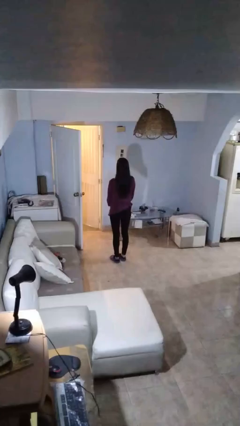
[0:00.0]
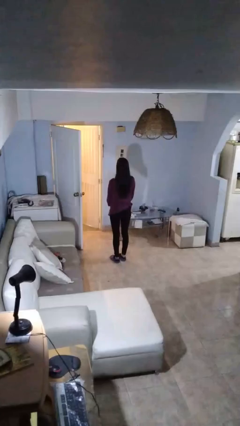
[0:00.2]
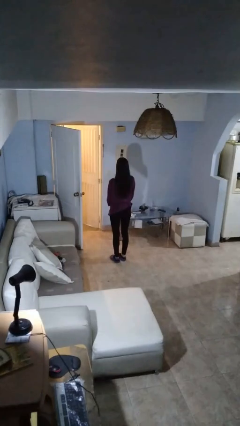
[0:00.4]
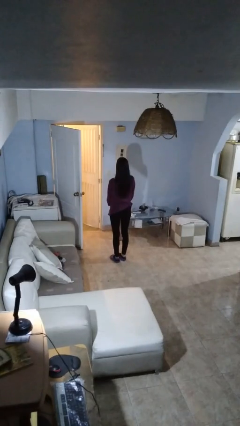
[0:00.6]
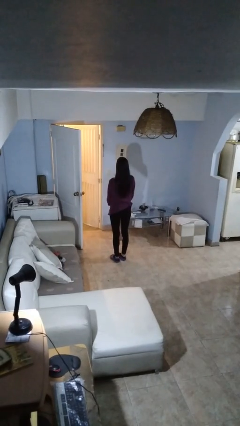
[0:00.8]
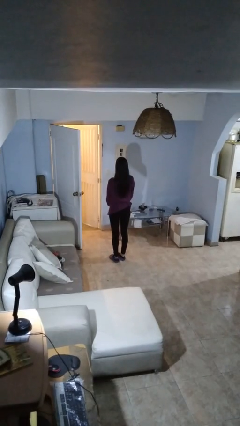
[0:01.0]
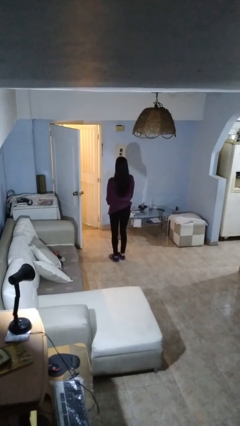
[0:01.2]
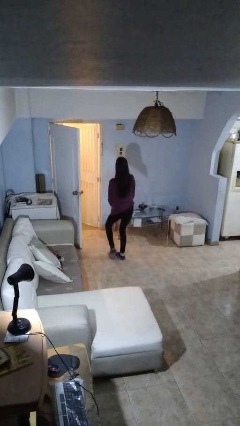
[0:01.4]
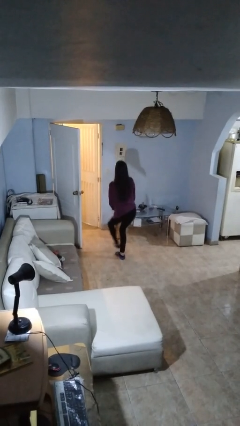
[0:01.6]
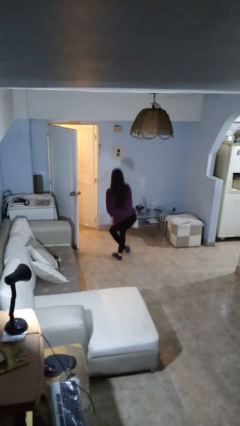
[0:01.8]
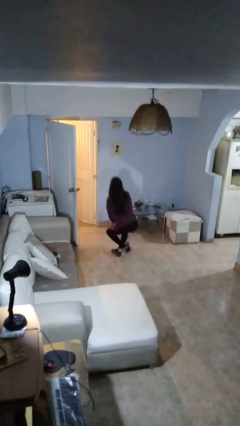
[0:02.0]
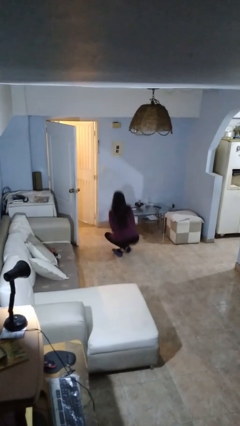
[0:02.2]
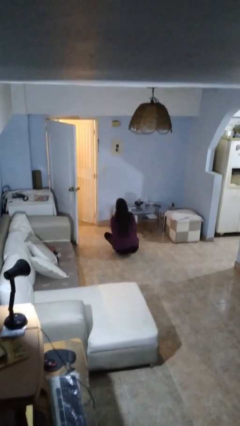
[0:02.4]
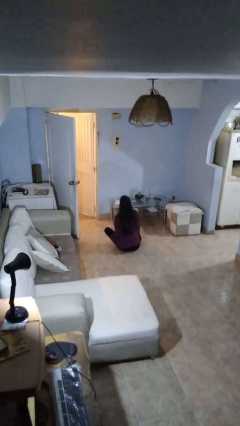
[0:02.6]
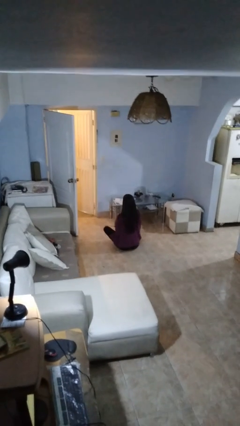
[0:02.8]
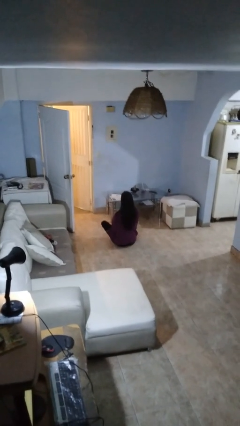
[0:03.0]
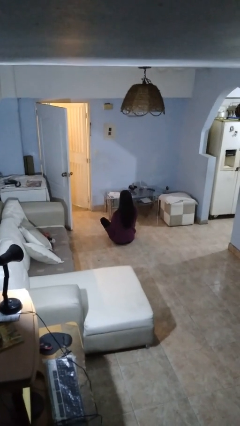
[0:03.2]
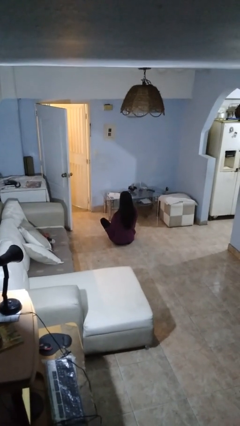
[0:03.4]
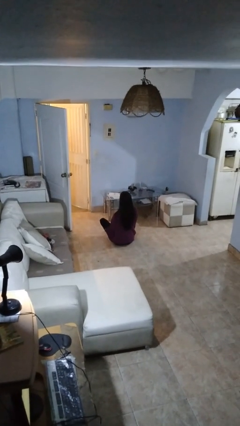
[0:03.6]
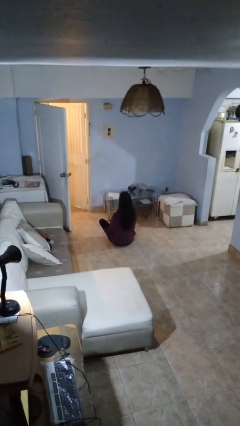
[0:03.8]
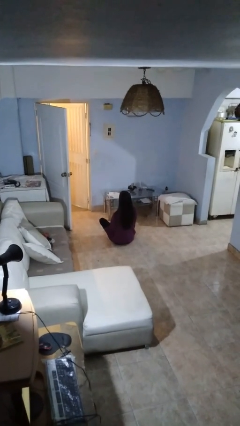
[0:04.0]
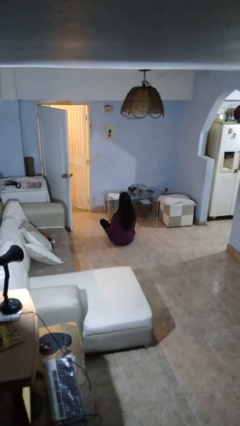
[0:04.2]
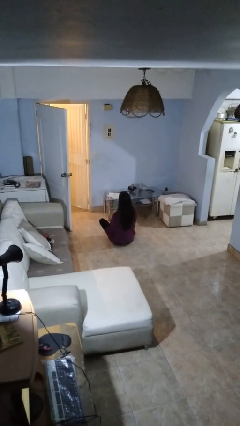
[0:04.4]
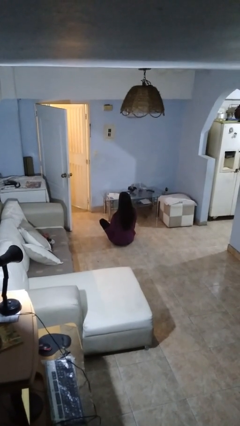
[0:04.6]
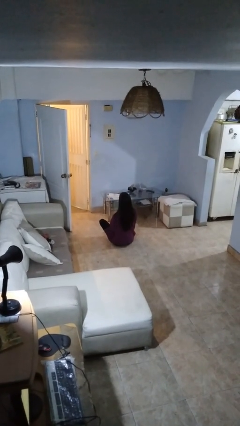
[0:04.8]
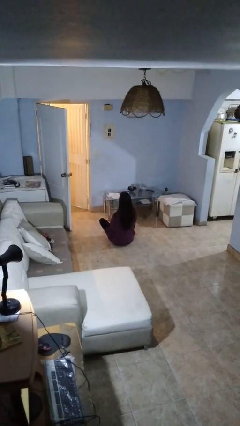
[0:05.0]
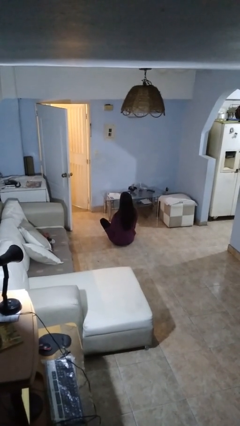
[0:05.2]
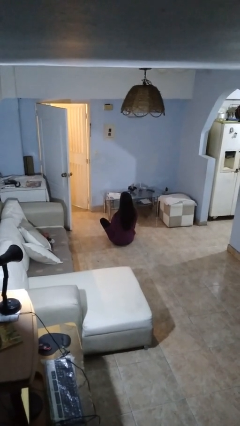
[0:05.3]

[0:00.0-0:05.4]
person sits crisscross

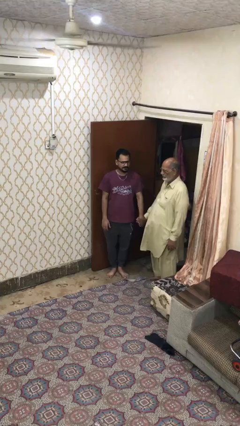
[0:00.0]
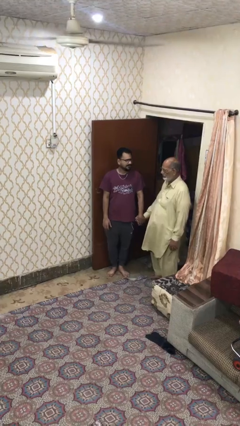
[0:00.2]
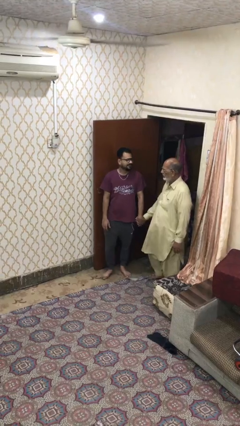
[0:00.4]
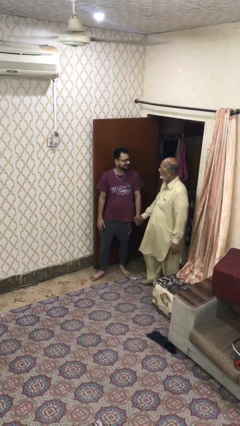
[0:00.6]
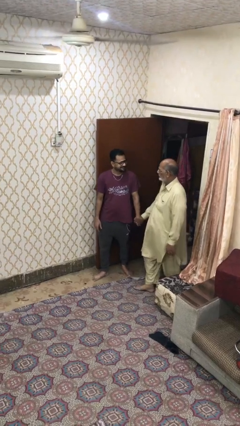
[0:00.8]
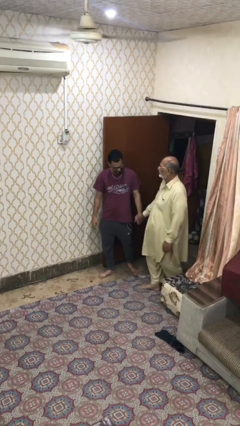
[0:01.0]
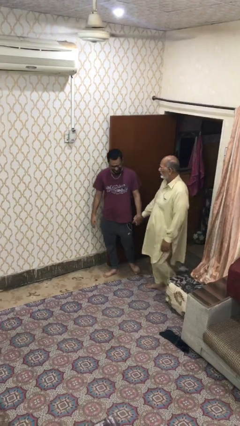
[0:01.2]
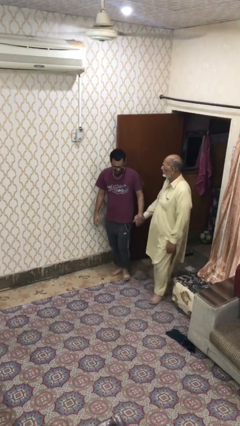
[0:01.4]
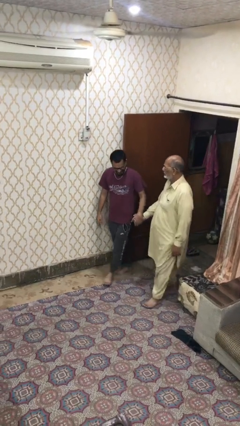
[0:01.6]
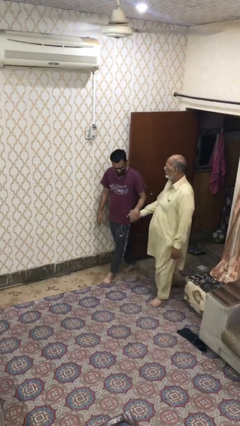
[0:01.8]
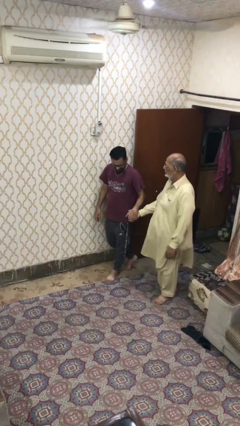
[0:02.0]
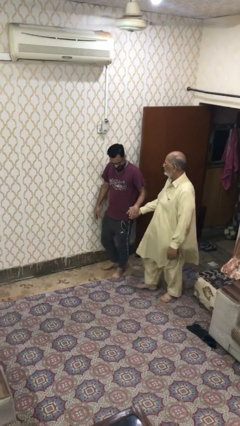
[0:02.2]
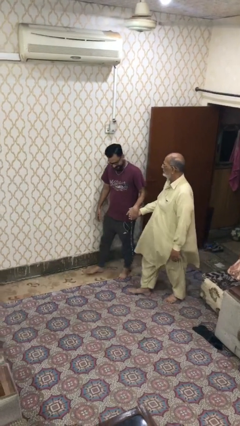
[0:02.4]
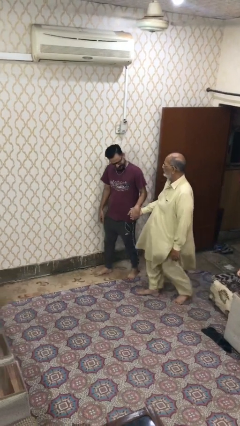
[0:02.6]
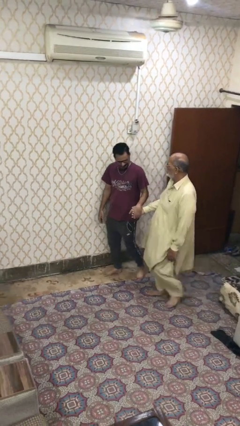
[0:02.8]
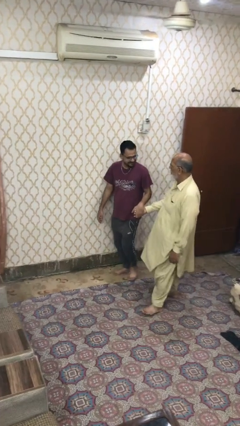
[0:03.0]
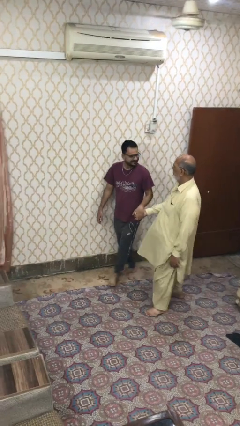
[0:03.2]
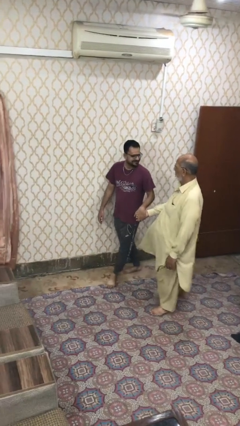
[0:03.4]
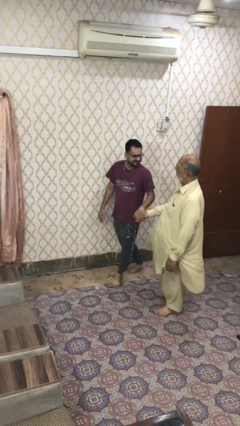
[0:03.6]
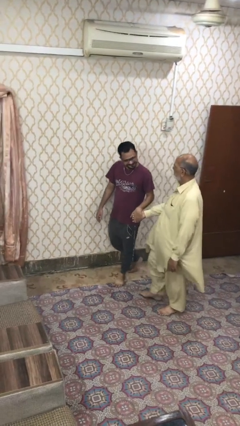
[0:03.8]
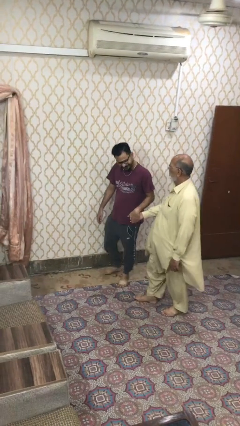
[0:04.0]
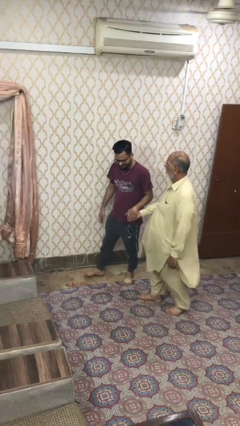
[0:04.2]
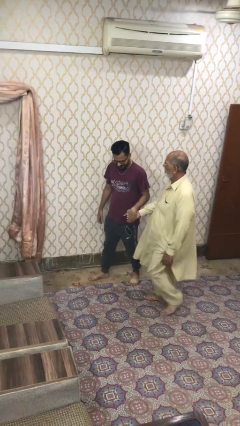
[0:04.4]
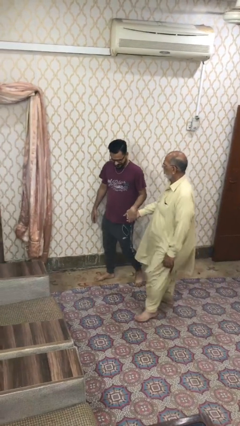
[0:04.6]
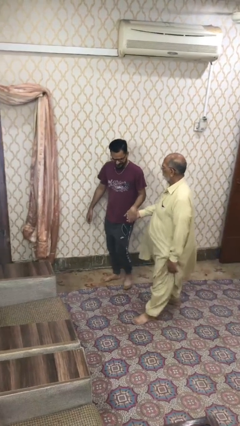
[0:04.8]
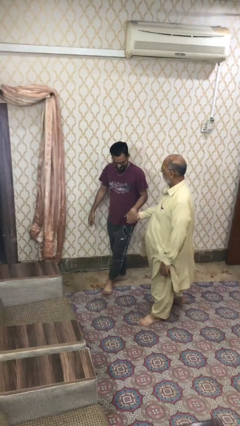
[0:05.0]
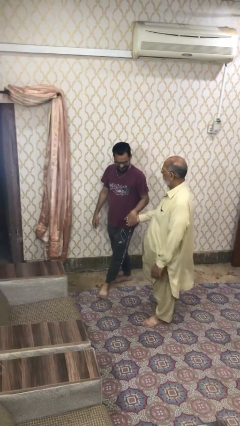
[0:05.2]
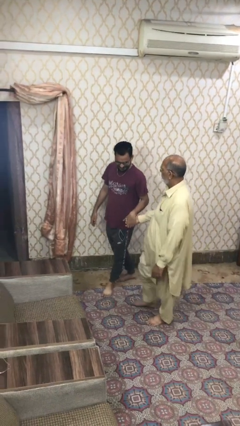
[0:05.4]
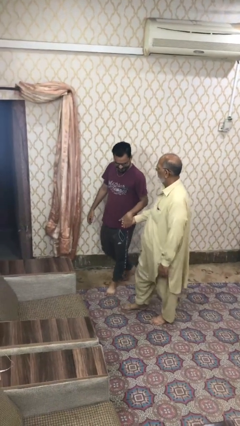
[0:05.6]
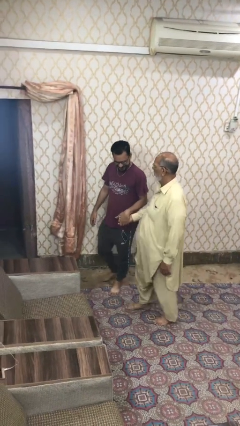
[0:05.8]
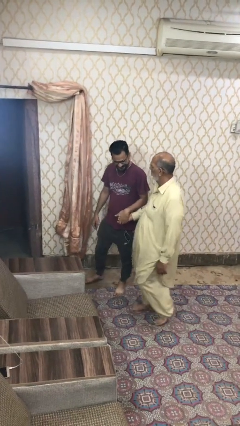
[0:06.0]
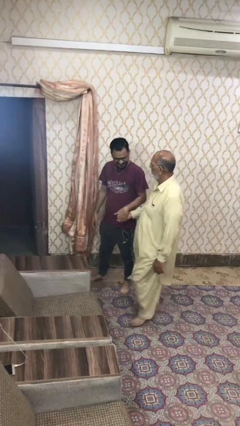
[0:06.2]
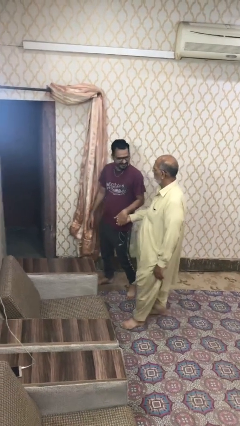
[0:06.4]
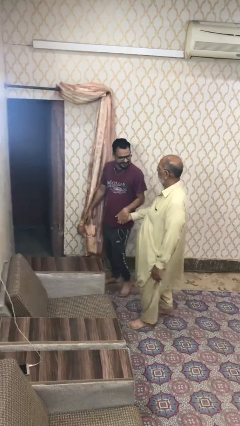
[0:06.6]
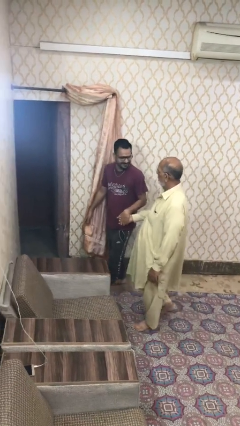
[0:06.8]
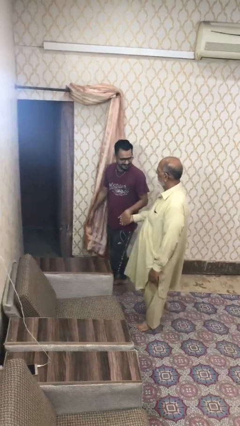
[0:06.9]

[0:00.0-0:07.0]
person holds hand

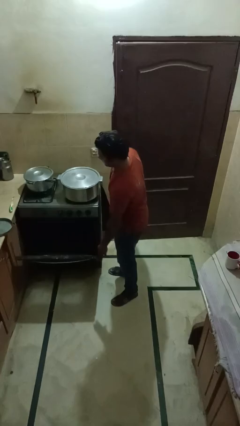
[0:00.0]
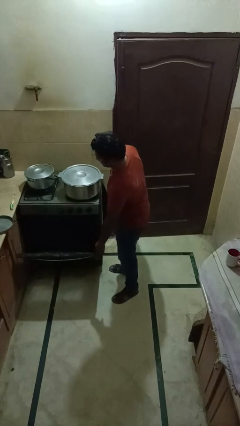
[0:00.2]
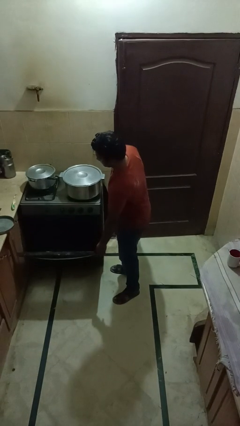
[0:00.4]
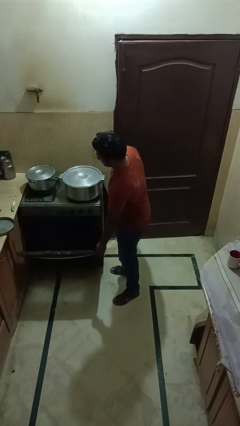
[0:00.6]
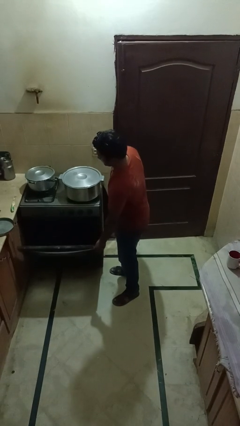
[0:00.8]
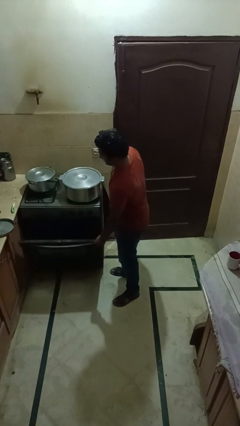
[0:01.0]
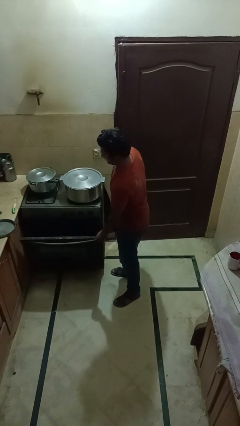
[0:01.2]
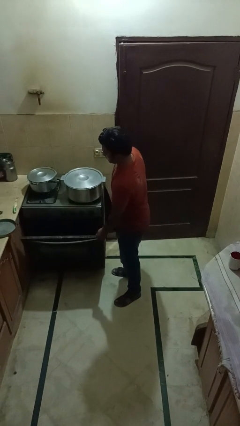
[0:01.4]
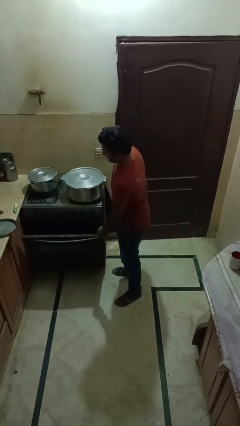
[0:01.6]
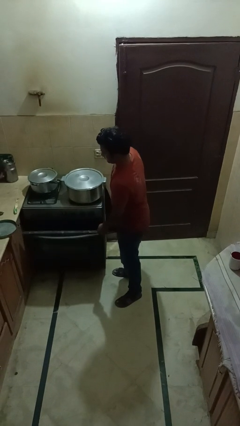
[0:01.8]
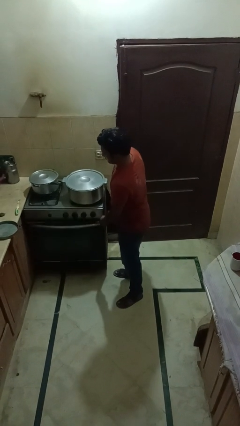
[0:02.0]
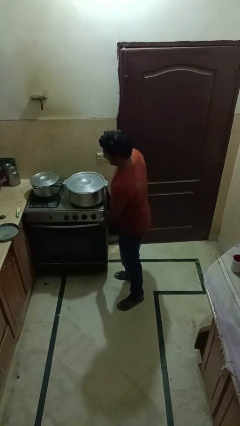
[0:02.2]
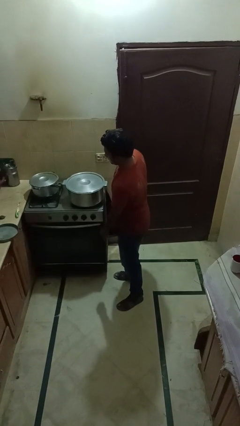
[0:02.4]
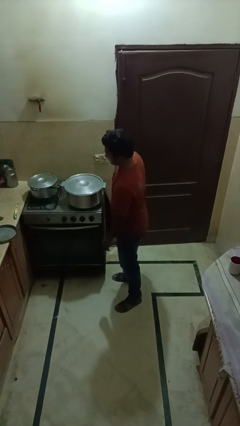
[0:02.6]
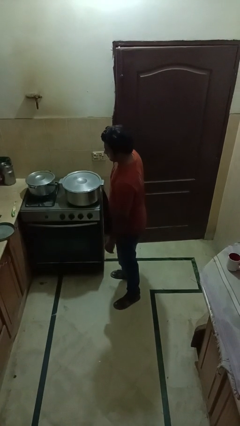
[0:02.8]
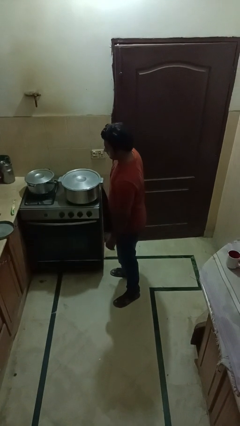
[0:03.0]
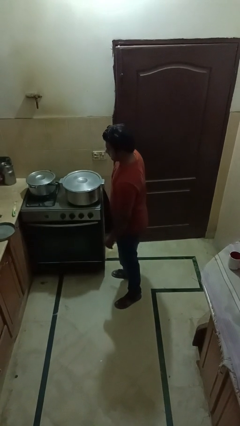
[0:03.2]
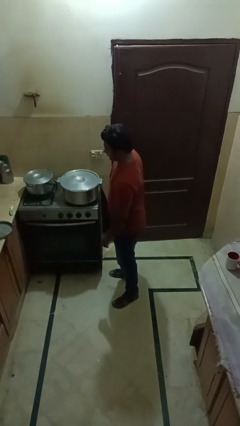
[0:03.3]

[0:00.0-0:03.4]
person closes oven door

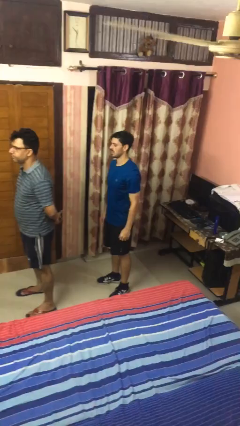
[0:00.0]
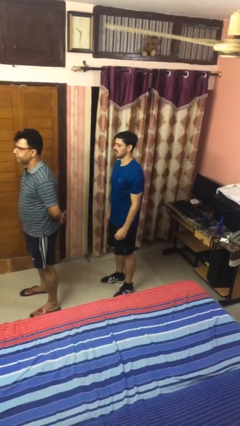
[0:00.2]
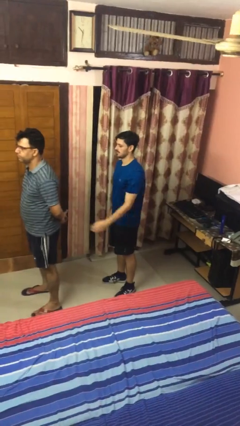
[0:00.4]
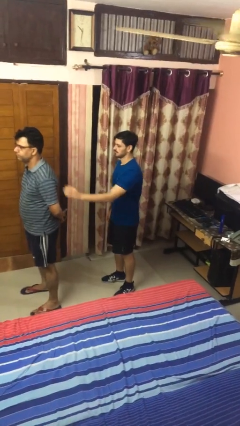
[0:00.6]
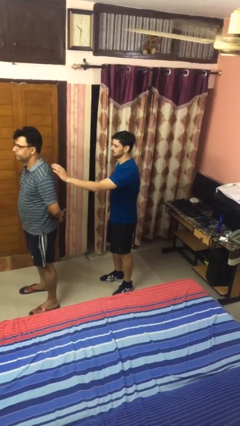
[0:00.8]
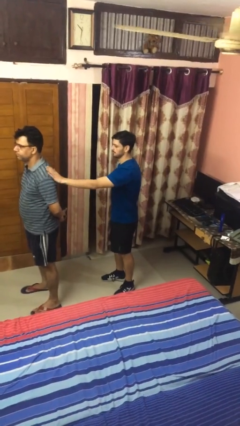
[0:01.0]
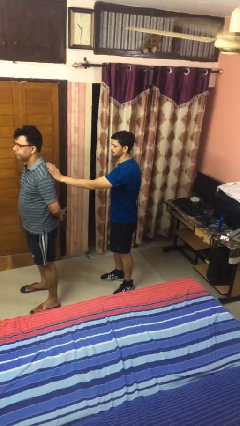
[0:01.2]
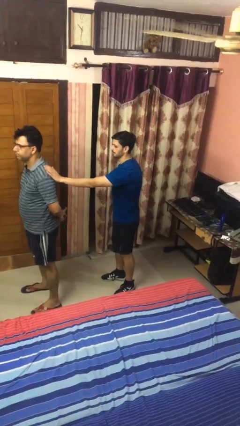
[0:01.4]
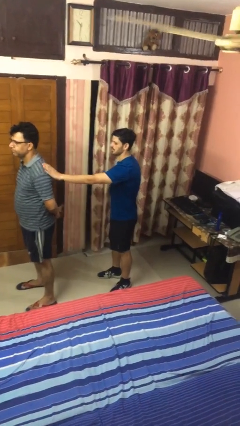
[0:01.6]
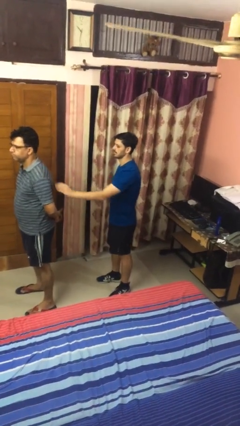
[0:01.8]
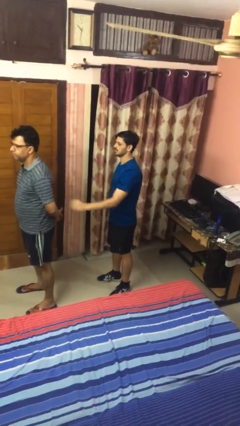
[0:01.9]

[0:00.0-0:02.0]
person touches back of person

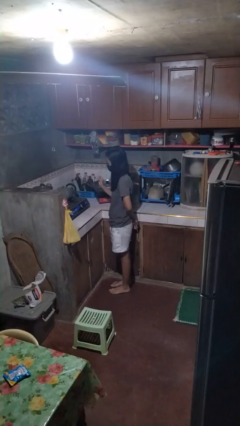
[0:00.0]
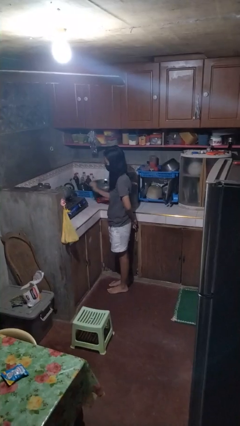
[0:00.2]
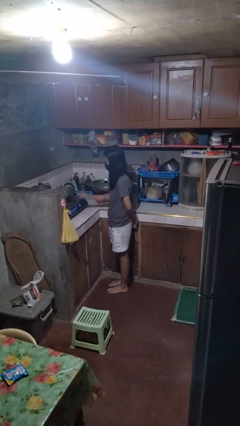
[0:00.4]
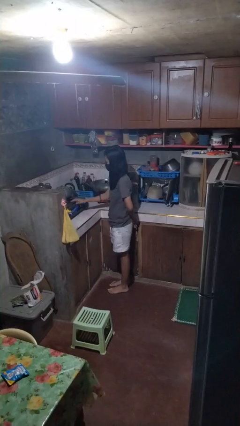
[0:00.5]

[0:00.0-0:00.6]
person burns hand
